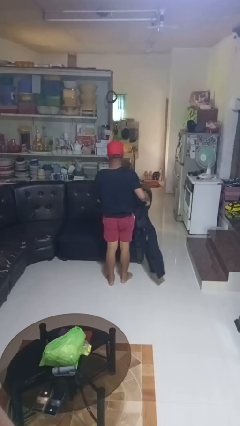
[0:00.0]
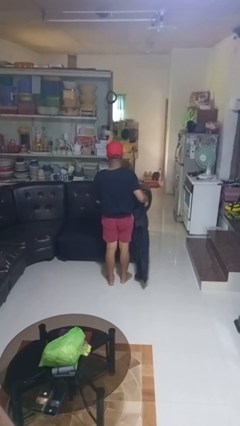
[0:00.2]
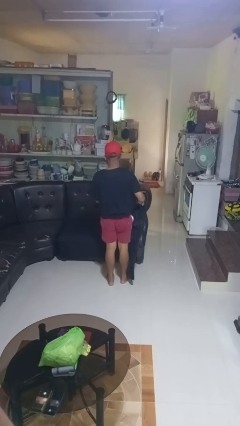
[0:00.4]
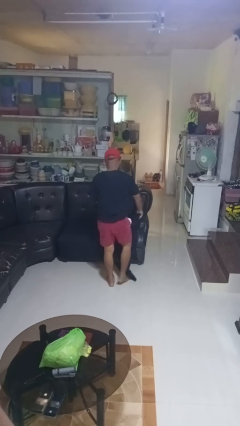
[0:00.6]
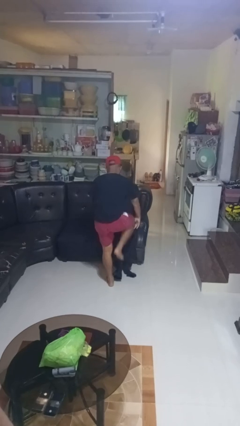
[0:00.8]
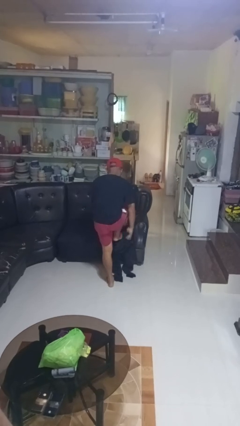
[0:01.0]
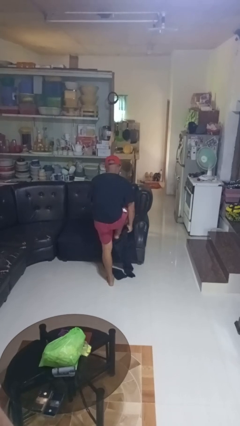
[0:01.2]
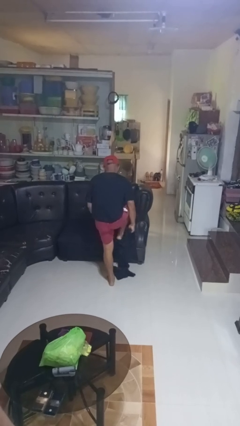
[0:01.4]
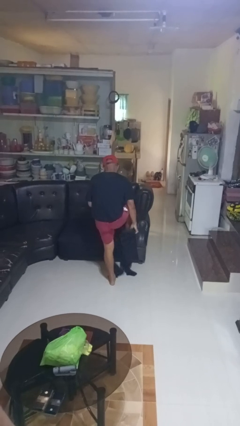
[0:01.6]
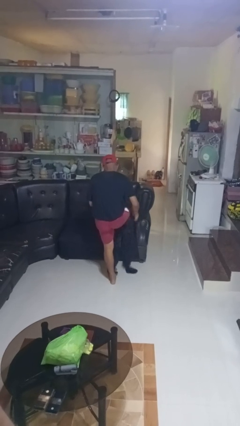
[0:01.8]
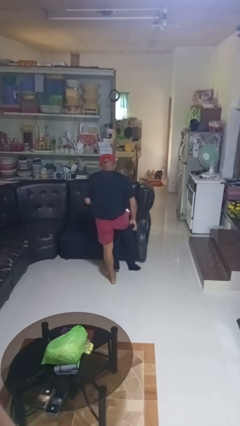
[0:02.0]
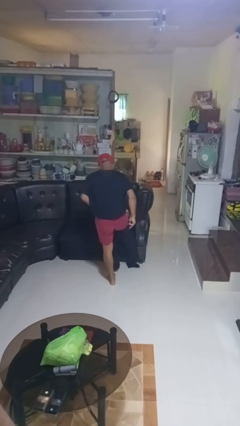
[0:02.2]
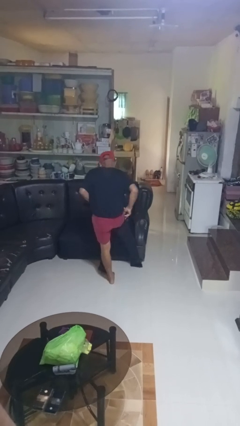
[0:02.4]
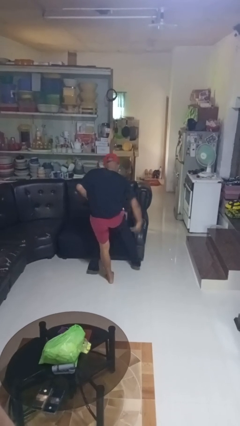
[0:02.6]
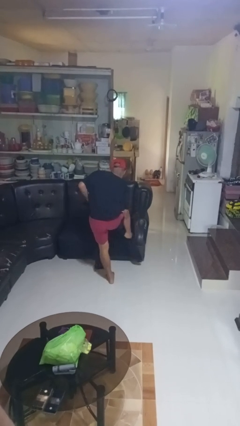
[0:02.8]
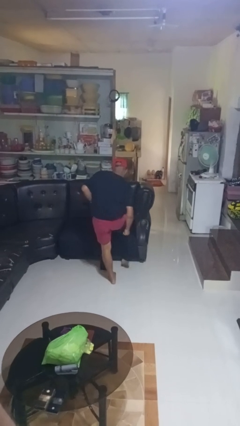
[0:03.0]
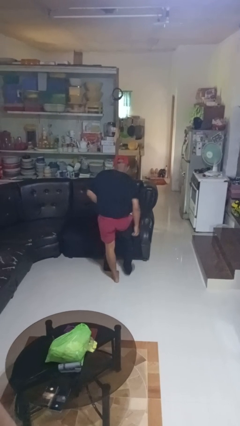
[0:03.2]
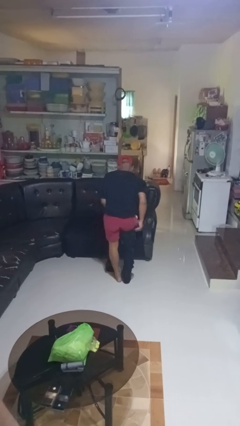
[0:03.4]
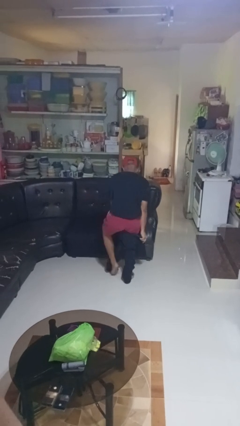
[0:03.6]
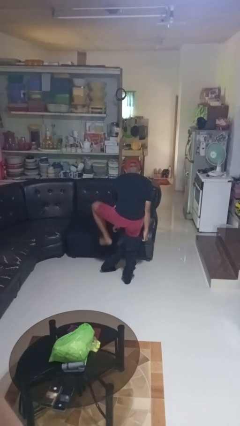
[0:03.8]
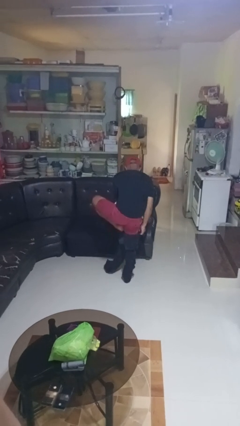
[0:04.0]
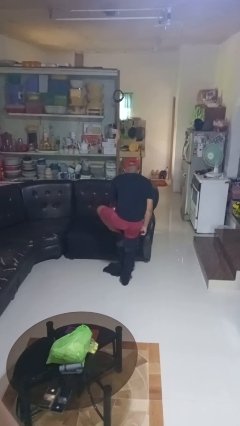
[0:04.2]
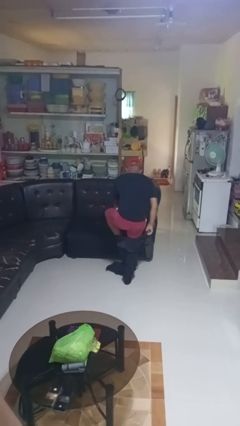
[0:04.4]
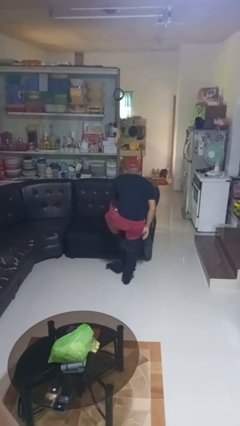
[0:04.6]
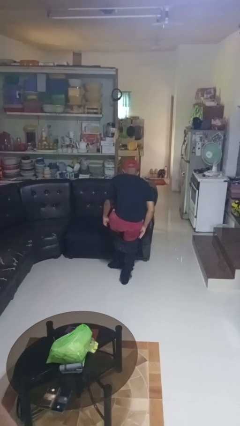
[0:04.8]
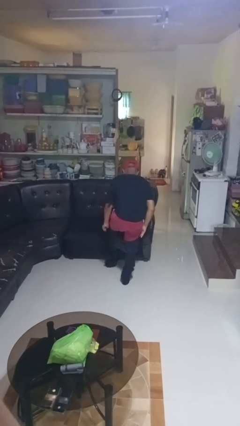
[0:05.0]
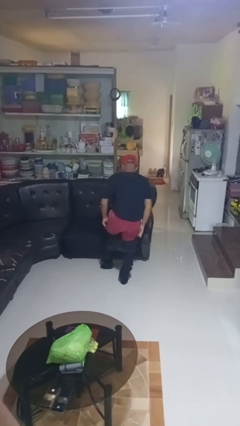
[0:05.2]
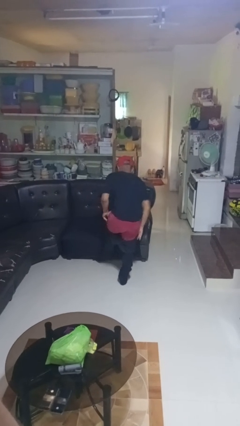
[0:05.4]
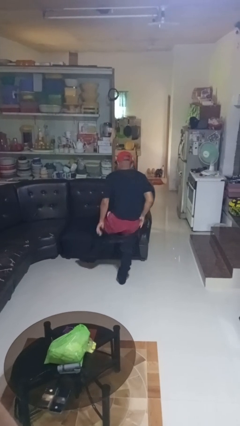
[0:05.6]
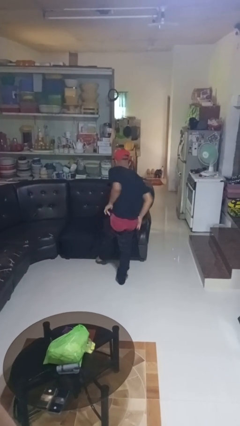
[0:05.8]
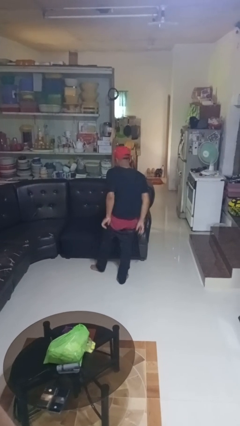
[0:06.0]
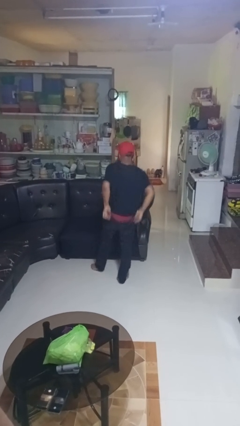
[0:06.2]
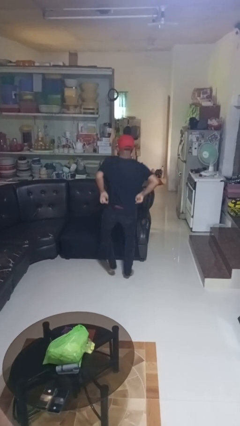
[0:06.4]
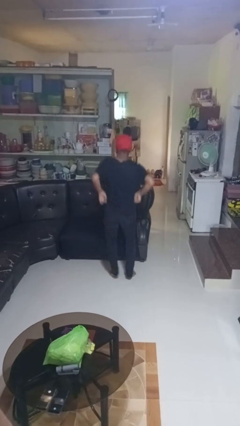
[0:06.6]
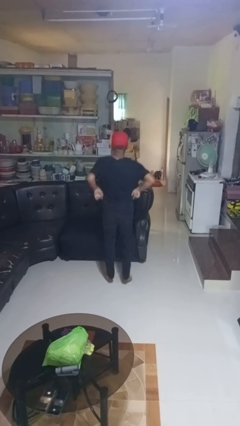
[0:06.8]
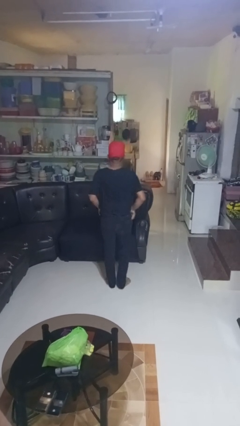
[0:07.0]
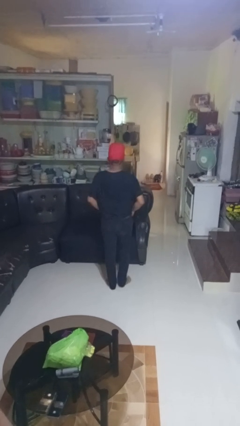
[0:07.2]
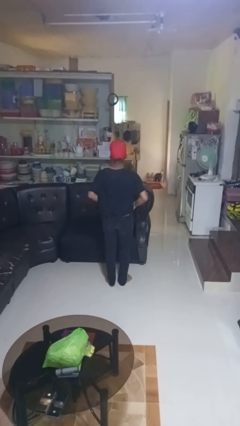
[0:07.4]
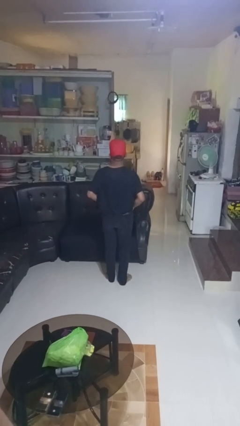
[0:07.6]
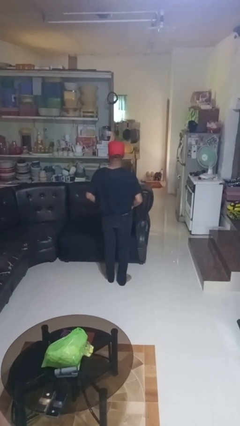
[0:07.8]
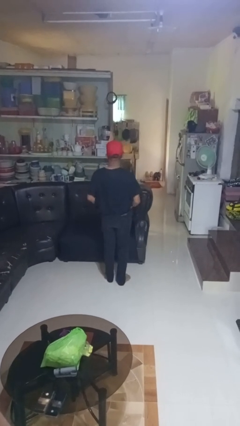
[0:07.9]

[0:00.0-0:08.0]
person puts on pants

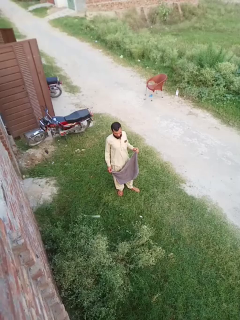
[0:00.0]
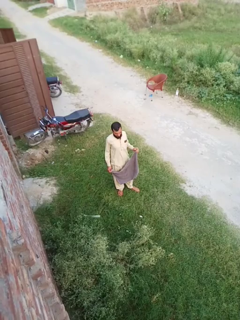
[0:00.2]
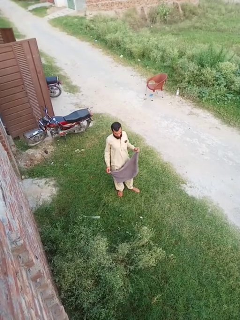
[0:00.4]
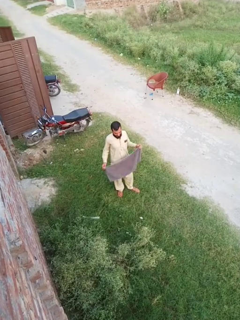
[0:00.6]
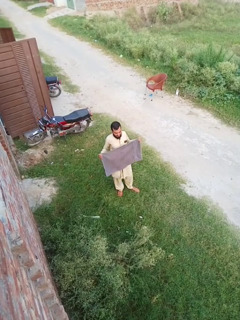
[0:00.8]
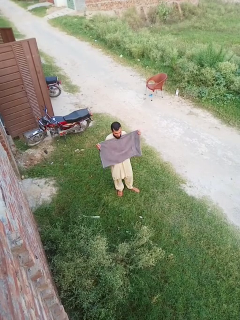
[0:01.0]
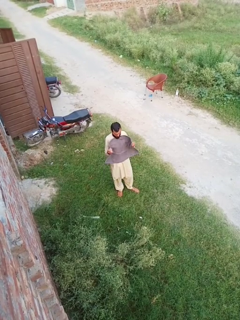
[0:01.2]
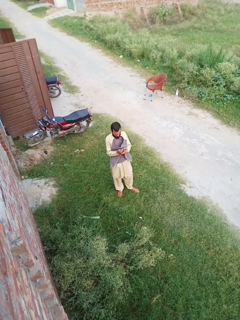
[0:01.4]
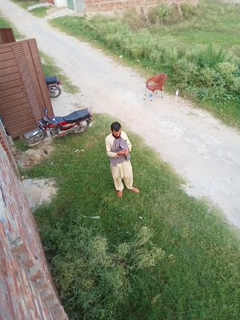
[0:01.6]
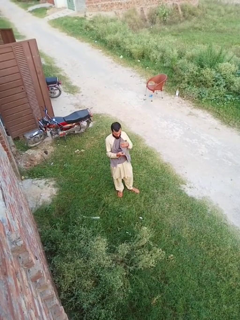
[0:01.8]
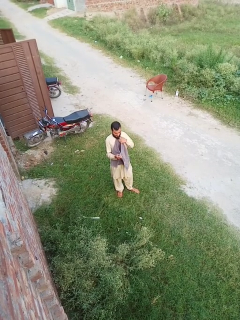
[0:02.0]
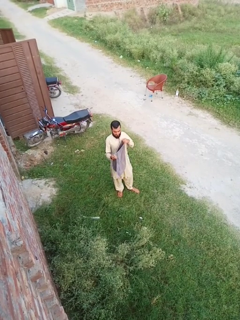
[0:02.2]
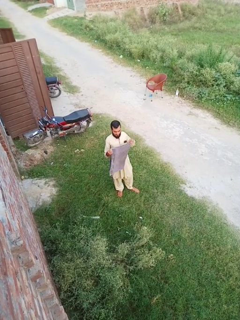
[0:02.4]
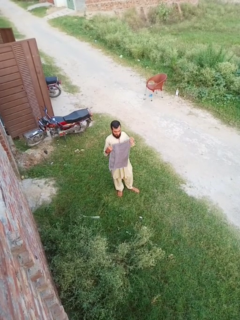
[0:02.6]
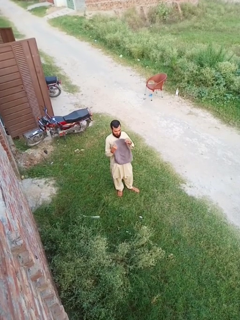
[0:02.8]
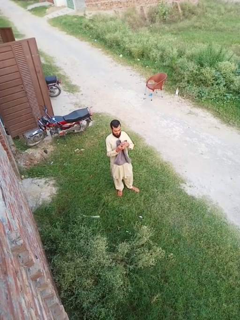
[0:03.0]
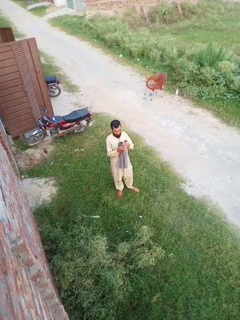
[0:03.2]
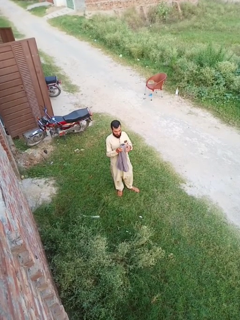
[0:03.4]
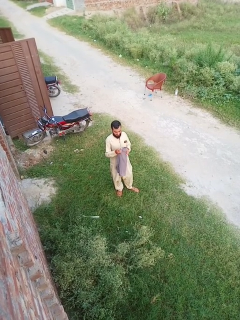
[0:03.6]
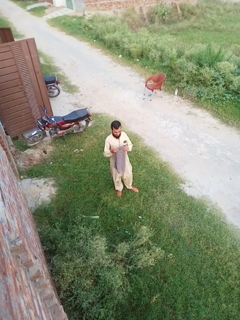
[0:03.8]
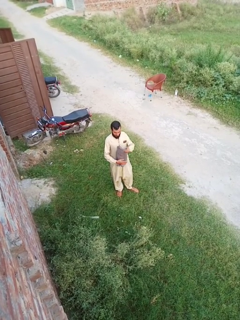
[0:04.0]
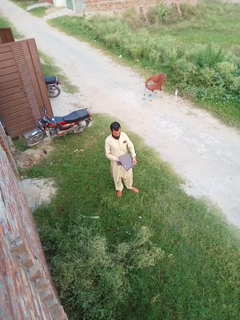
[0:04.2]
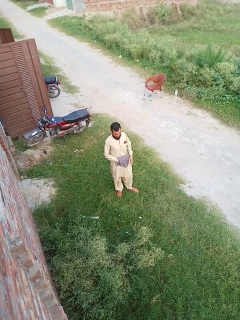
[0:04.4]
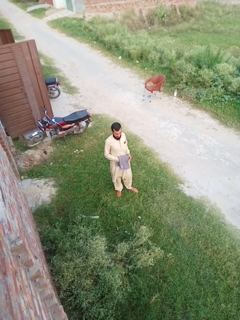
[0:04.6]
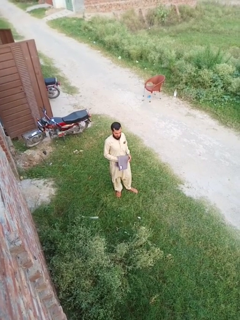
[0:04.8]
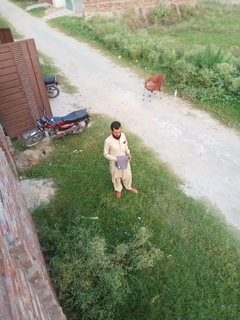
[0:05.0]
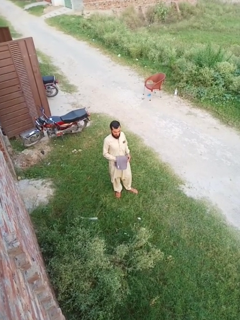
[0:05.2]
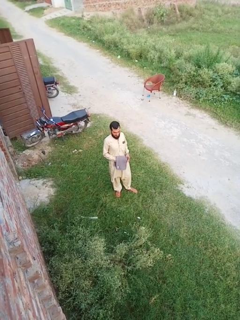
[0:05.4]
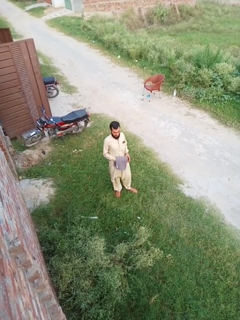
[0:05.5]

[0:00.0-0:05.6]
person folds towel

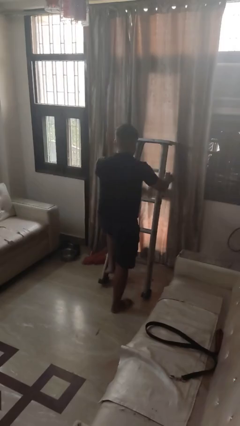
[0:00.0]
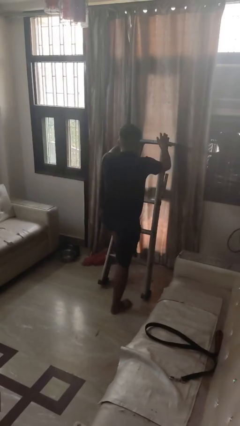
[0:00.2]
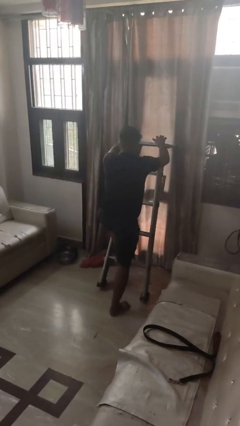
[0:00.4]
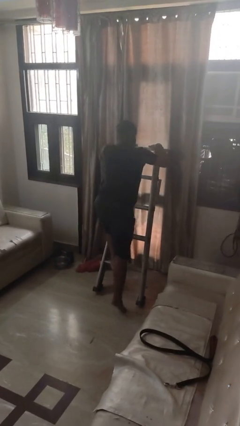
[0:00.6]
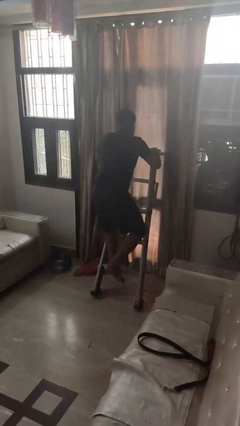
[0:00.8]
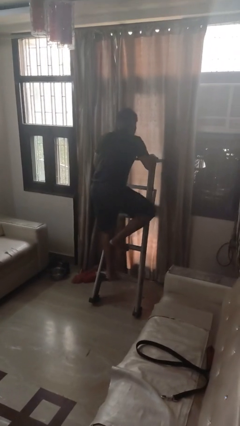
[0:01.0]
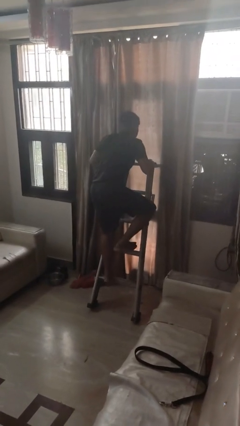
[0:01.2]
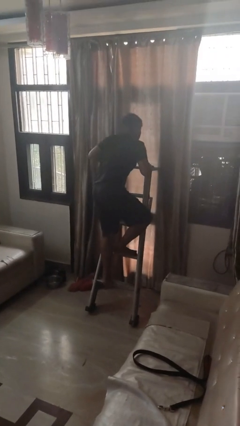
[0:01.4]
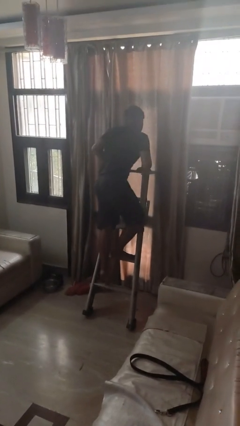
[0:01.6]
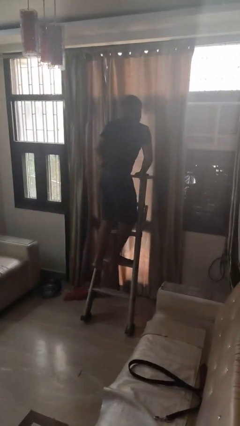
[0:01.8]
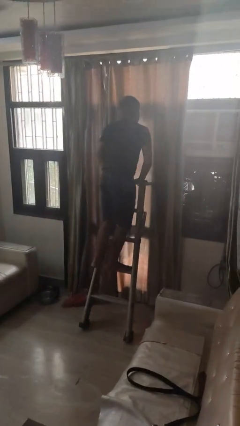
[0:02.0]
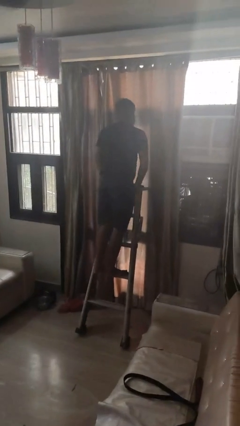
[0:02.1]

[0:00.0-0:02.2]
person climbs up ladder

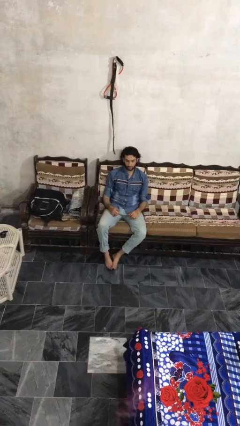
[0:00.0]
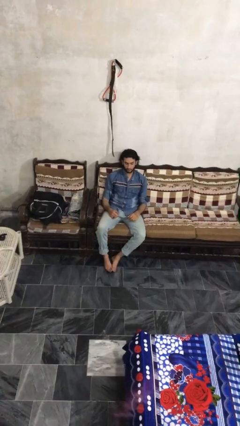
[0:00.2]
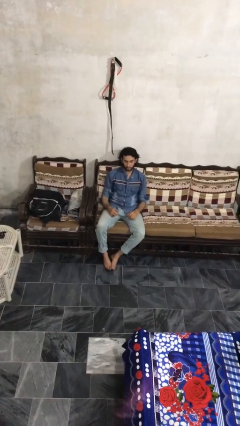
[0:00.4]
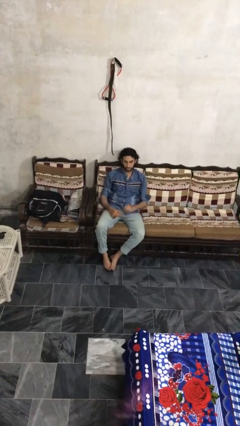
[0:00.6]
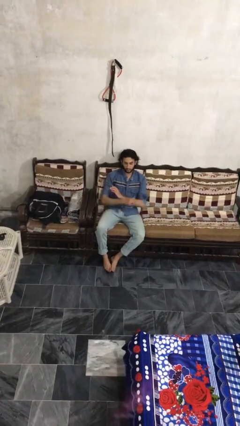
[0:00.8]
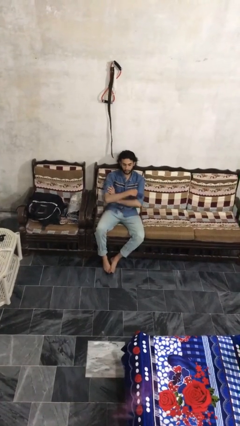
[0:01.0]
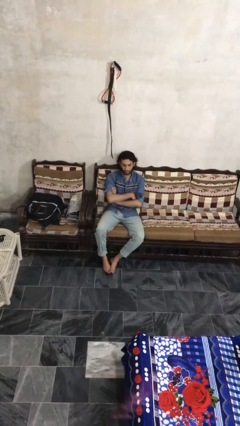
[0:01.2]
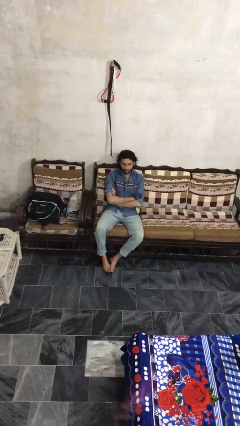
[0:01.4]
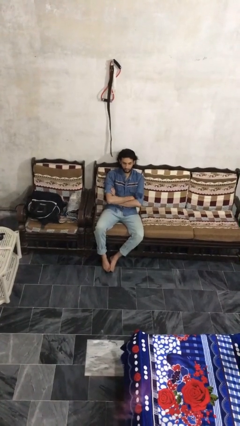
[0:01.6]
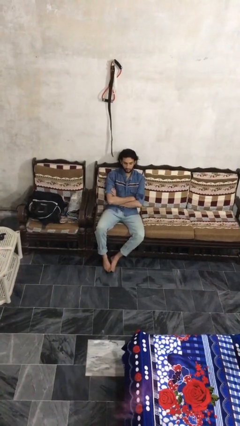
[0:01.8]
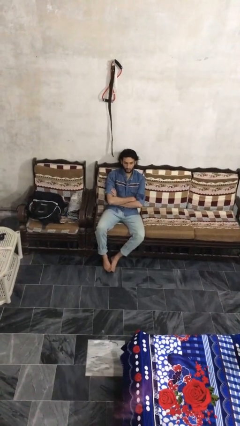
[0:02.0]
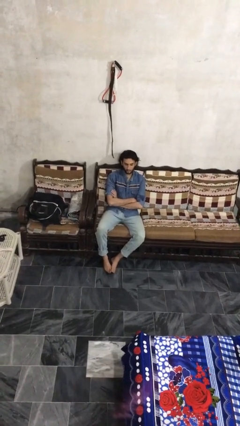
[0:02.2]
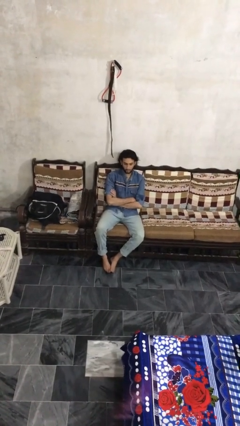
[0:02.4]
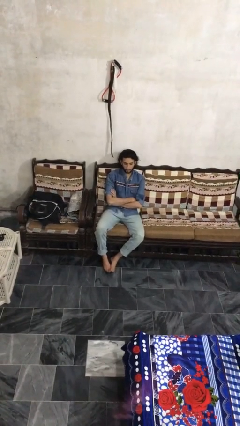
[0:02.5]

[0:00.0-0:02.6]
person crosses arms

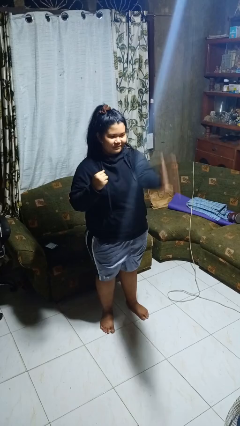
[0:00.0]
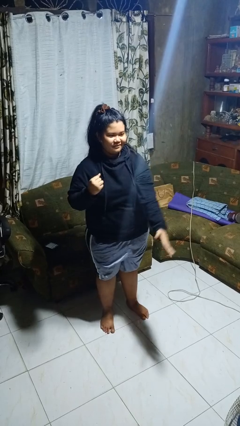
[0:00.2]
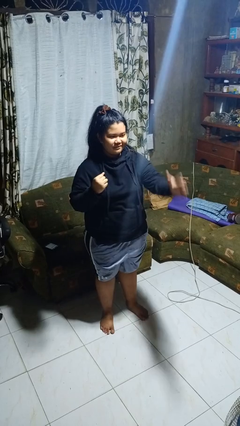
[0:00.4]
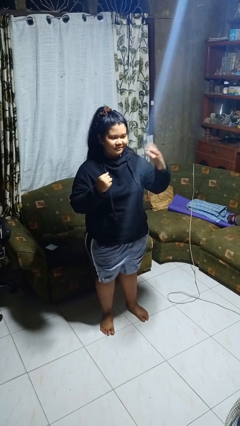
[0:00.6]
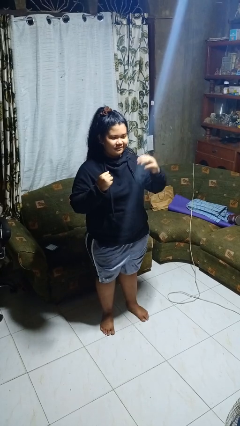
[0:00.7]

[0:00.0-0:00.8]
person karate chop
